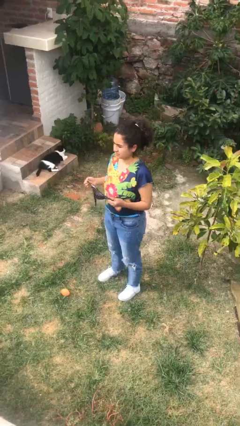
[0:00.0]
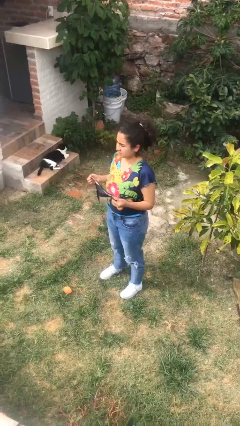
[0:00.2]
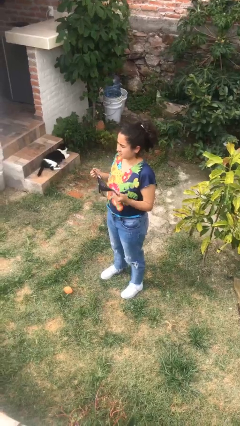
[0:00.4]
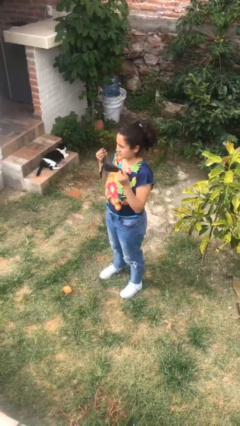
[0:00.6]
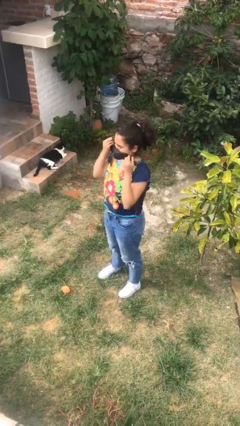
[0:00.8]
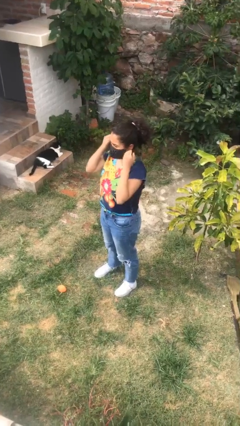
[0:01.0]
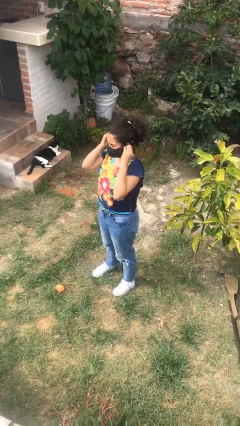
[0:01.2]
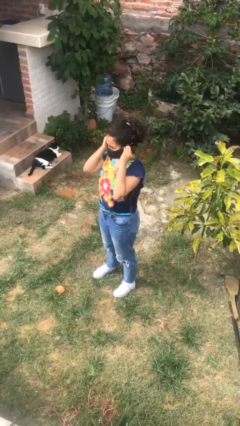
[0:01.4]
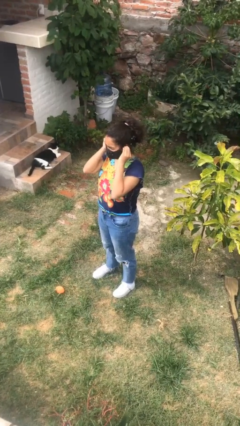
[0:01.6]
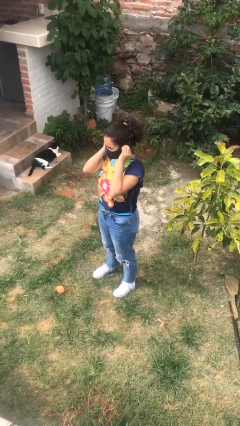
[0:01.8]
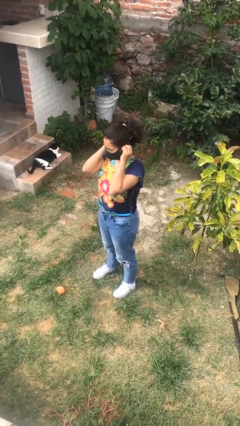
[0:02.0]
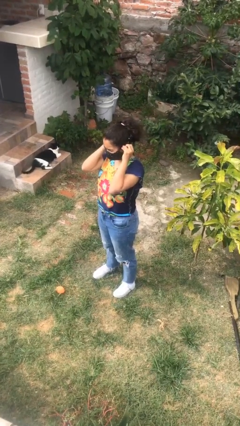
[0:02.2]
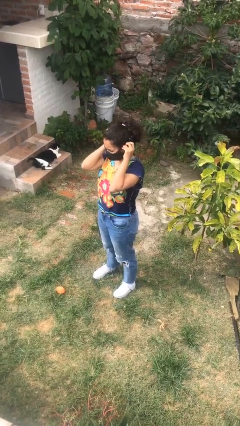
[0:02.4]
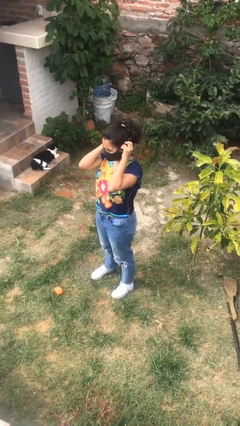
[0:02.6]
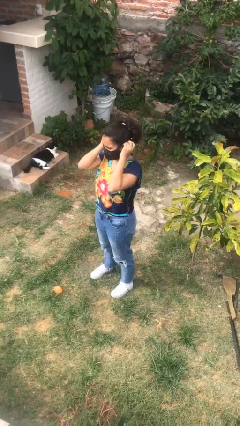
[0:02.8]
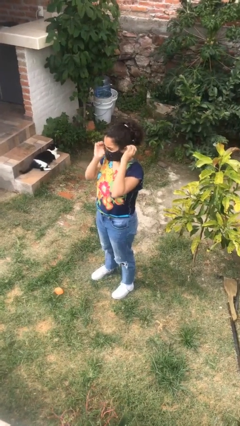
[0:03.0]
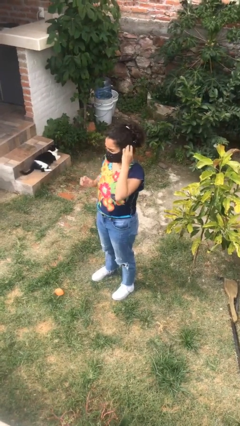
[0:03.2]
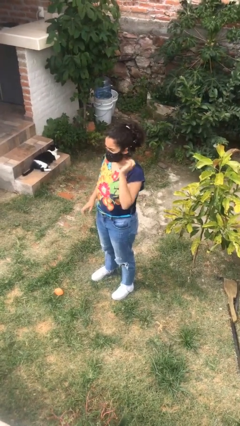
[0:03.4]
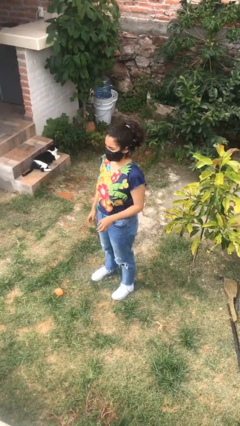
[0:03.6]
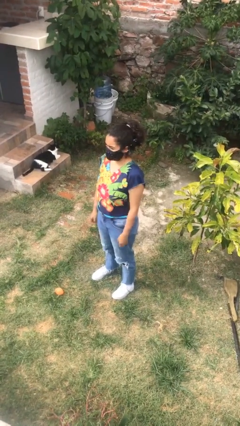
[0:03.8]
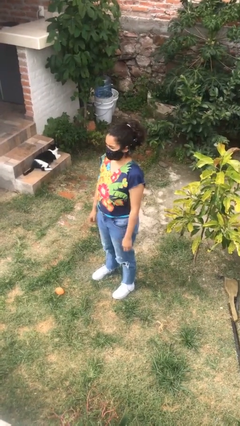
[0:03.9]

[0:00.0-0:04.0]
person puts on facemask

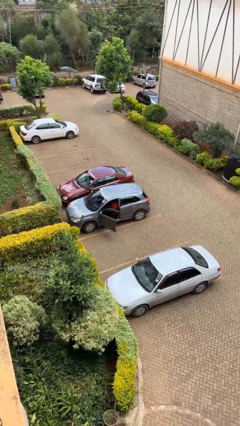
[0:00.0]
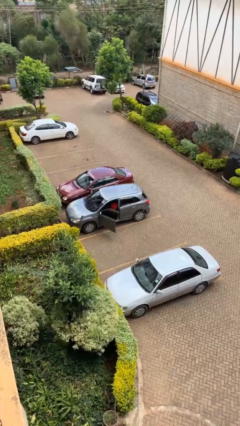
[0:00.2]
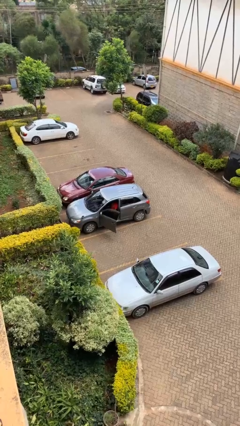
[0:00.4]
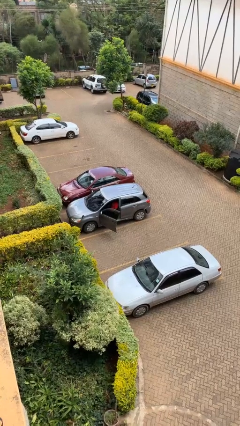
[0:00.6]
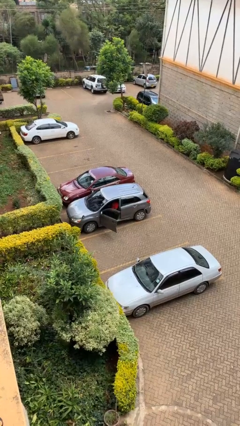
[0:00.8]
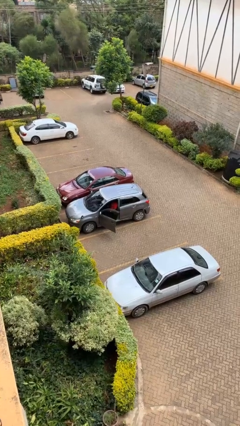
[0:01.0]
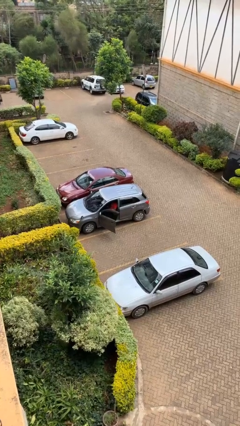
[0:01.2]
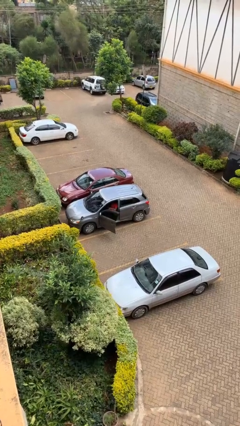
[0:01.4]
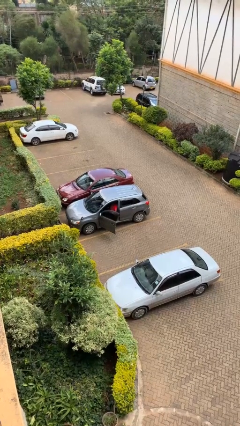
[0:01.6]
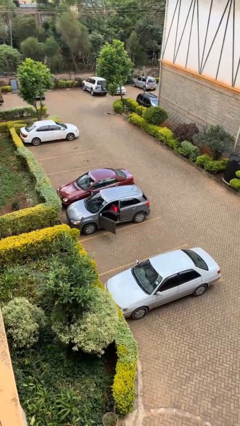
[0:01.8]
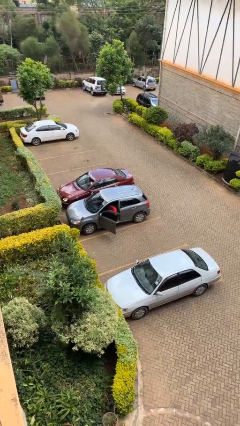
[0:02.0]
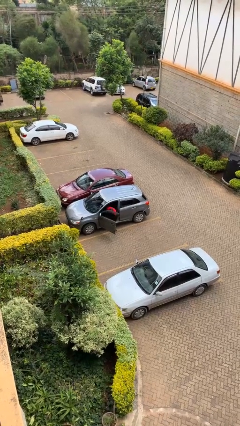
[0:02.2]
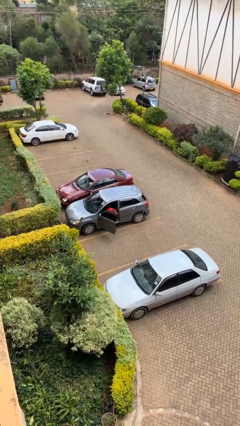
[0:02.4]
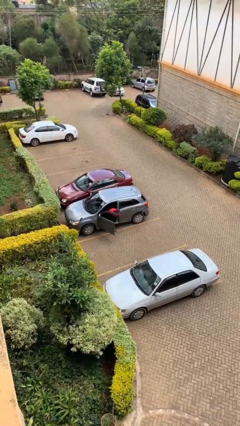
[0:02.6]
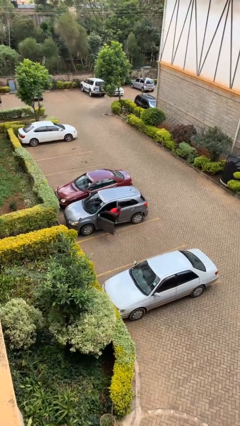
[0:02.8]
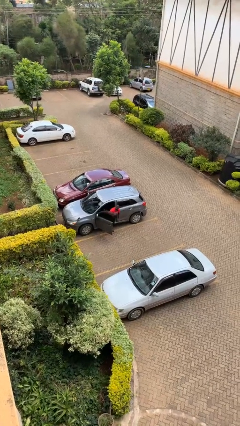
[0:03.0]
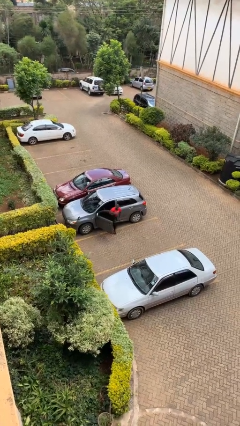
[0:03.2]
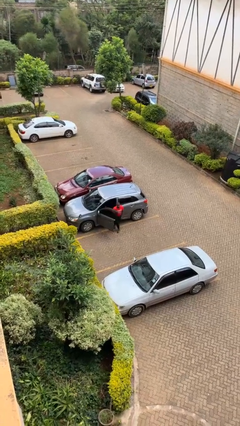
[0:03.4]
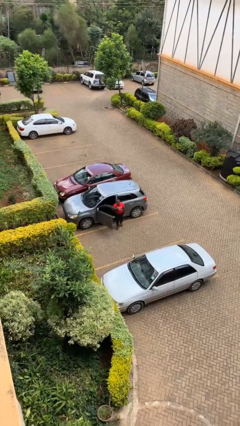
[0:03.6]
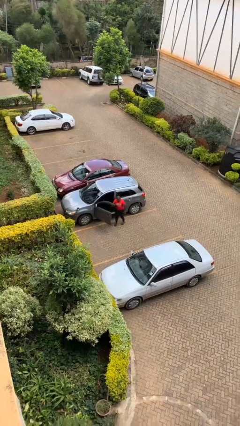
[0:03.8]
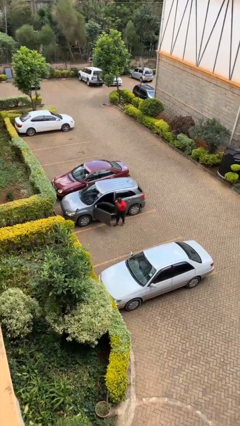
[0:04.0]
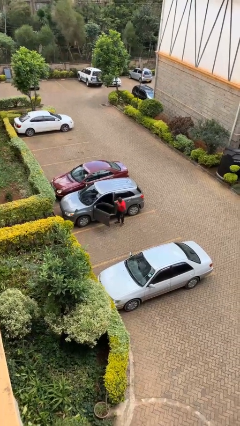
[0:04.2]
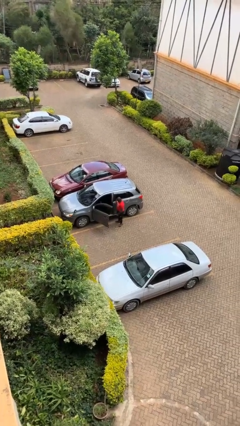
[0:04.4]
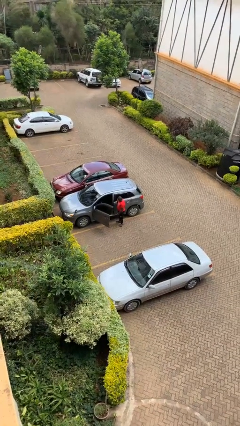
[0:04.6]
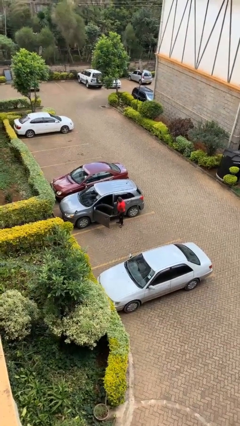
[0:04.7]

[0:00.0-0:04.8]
person exits car

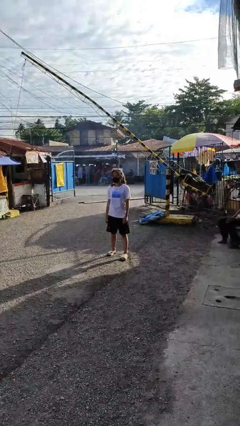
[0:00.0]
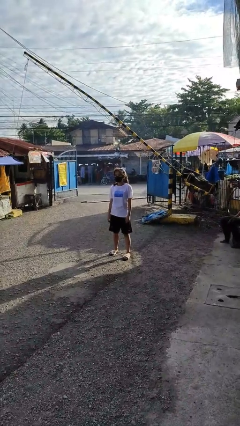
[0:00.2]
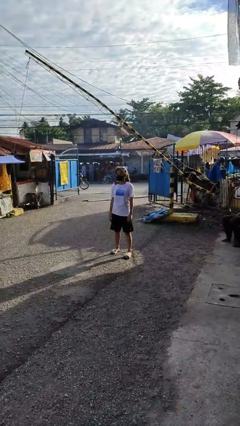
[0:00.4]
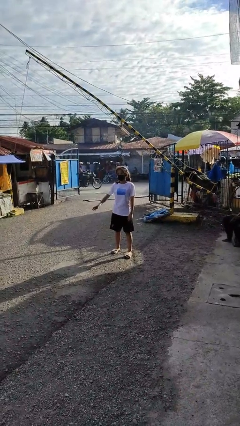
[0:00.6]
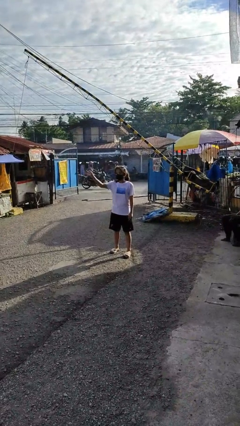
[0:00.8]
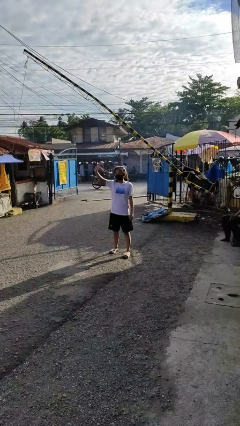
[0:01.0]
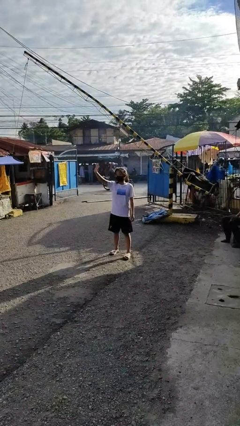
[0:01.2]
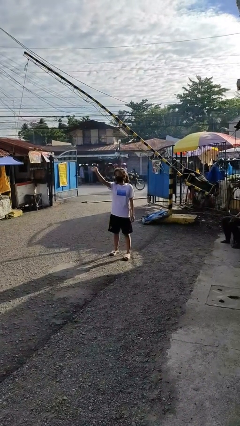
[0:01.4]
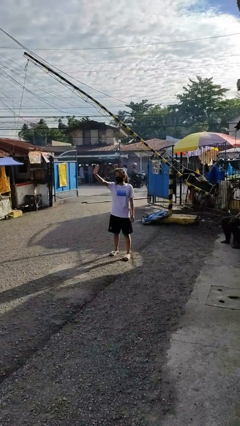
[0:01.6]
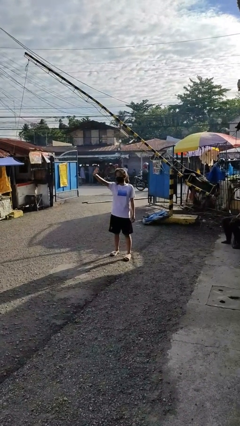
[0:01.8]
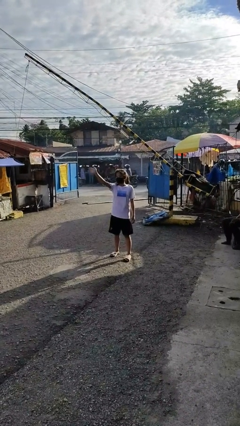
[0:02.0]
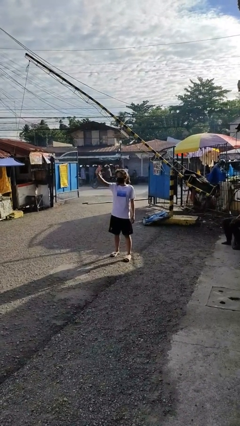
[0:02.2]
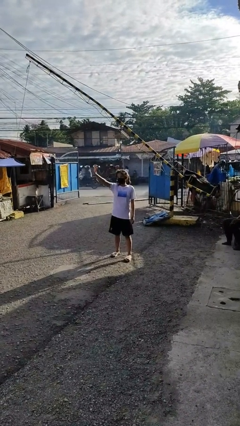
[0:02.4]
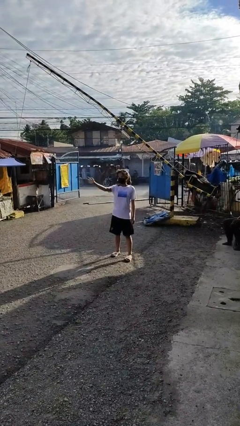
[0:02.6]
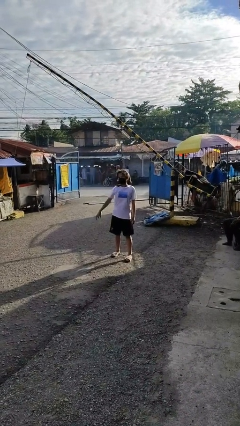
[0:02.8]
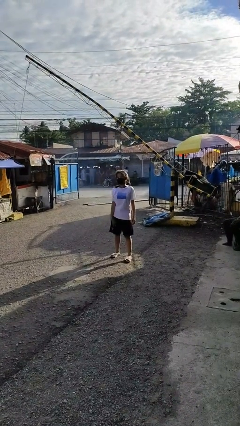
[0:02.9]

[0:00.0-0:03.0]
person waves at person

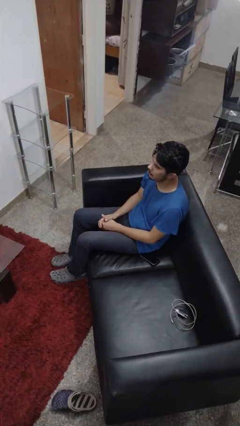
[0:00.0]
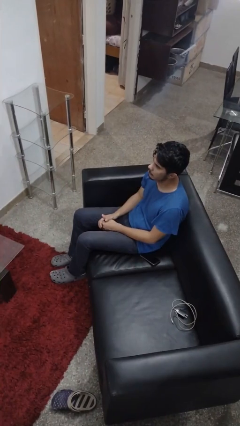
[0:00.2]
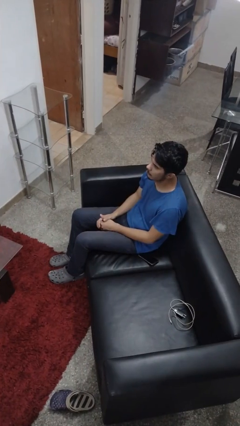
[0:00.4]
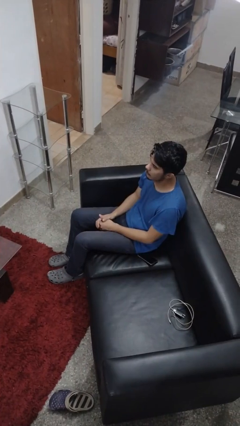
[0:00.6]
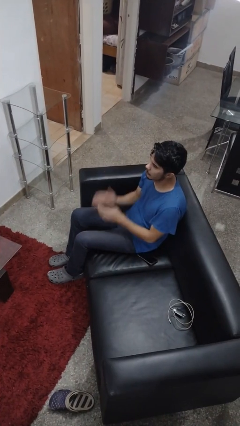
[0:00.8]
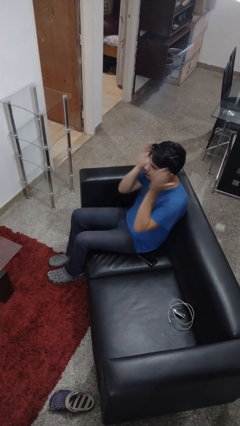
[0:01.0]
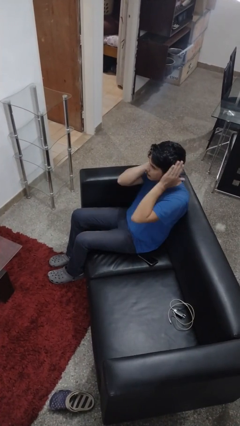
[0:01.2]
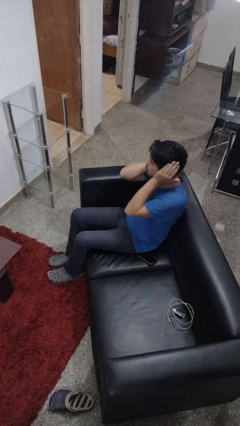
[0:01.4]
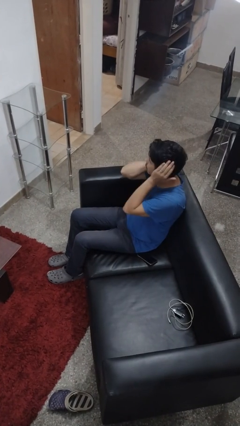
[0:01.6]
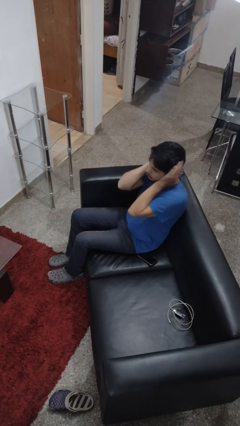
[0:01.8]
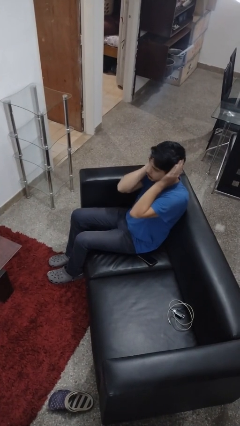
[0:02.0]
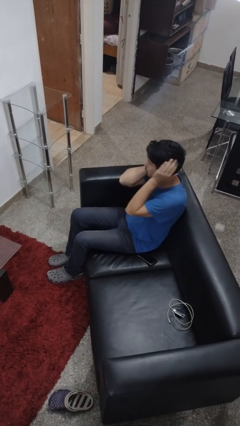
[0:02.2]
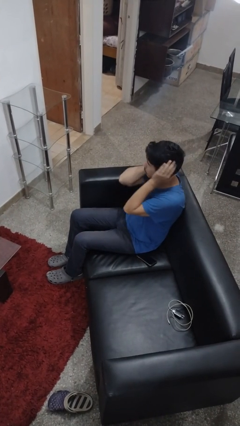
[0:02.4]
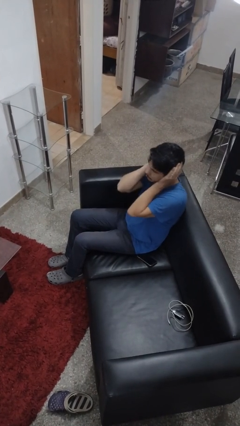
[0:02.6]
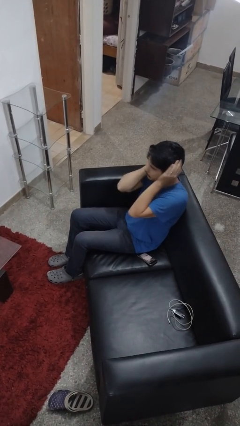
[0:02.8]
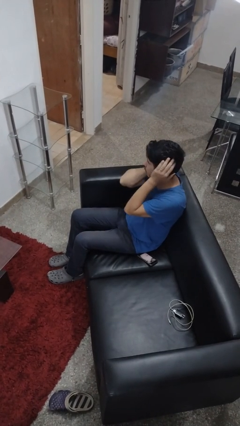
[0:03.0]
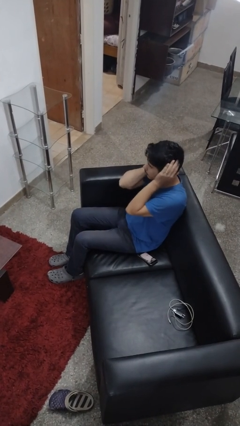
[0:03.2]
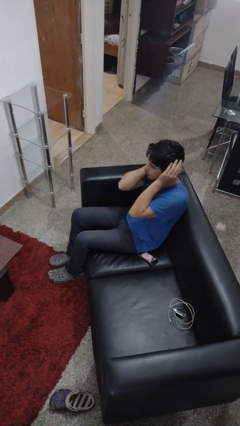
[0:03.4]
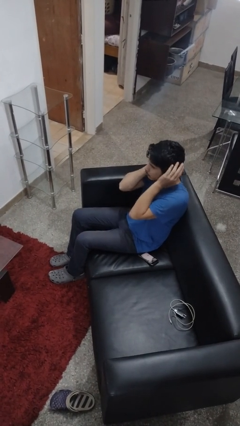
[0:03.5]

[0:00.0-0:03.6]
person puts fingers in ear

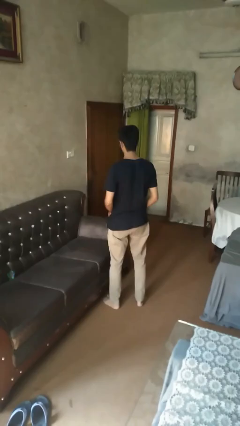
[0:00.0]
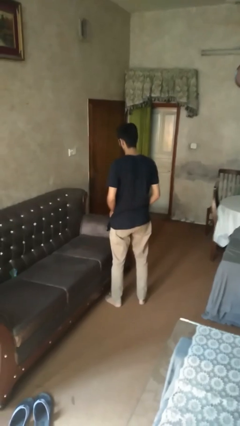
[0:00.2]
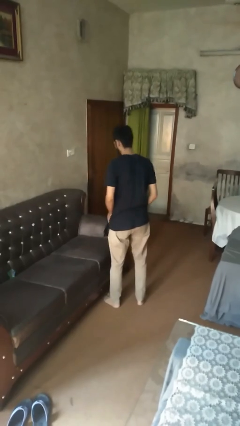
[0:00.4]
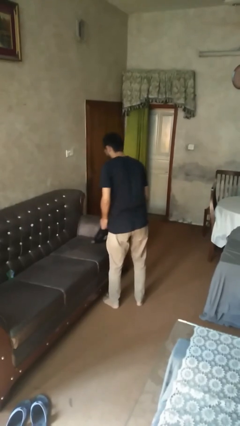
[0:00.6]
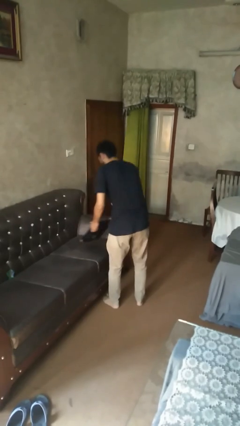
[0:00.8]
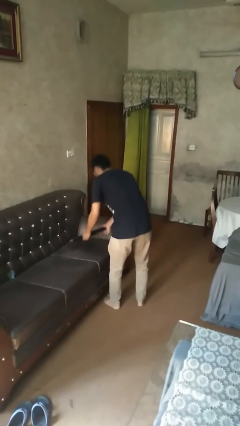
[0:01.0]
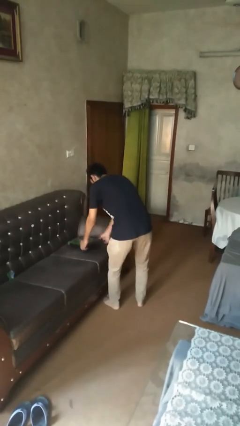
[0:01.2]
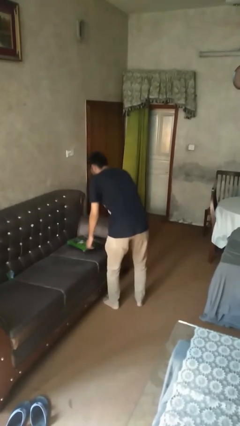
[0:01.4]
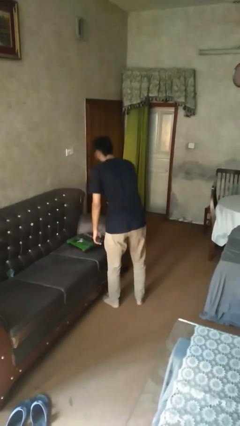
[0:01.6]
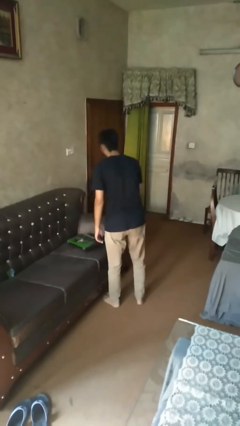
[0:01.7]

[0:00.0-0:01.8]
person puts down object on couch

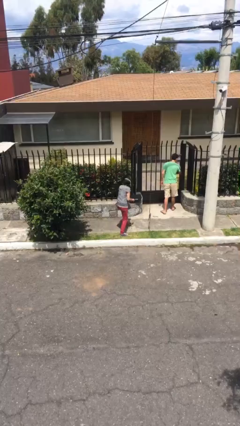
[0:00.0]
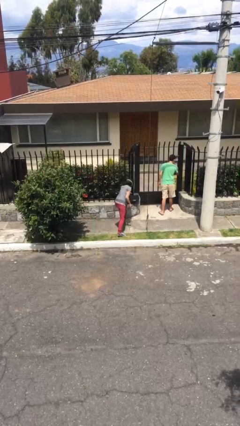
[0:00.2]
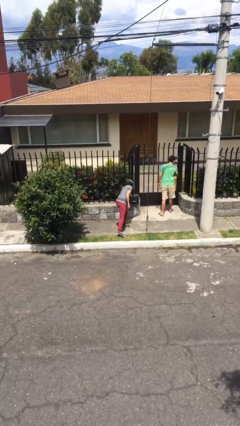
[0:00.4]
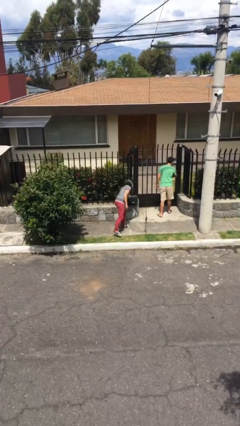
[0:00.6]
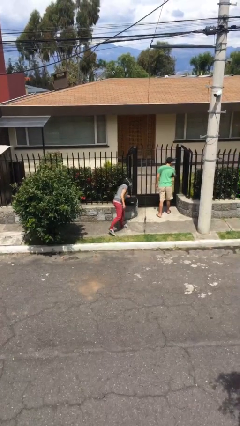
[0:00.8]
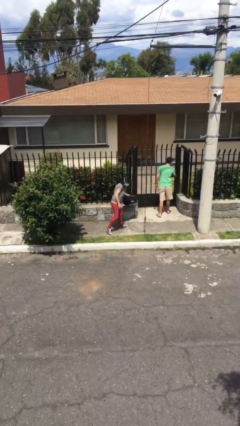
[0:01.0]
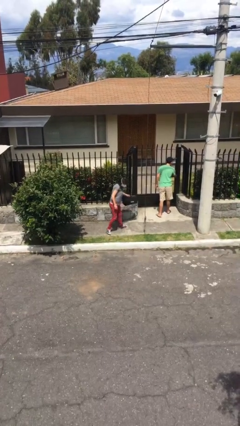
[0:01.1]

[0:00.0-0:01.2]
person steals object from person
